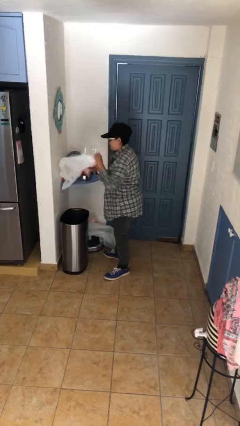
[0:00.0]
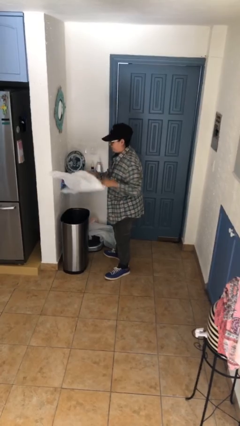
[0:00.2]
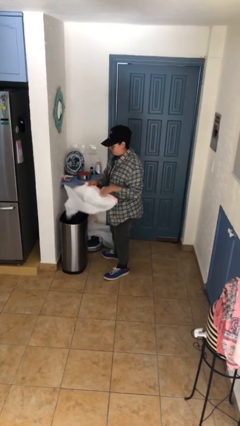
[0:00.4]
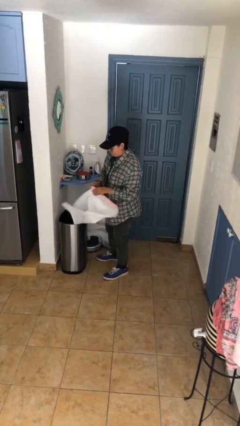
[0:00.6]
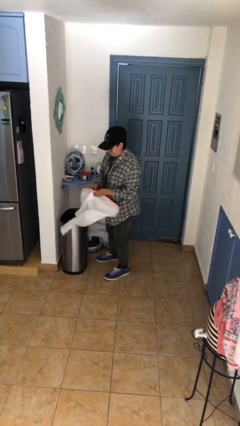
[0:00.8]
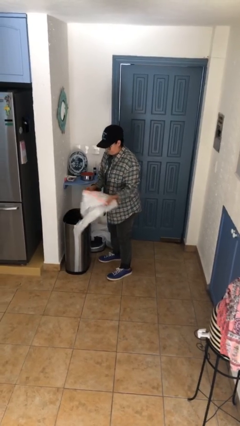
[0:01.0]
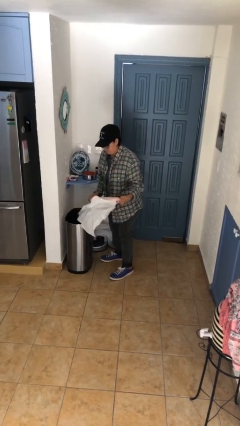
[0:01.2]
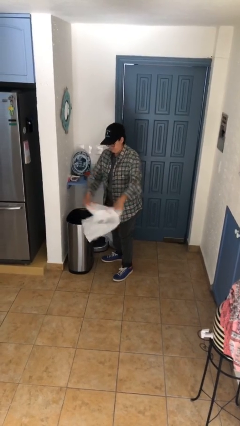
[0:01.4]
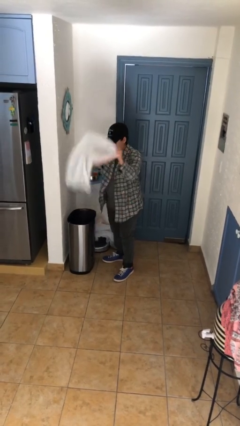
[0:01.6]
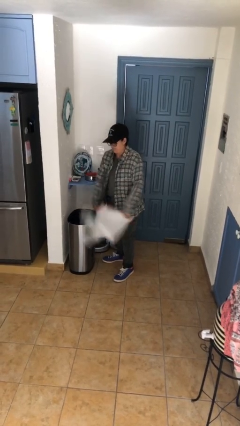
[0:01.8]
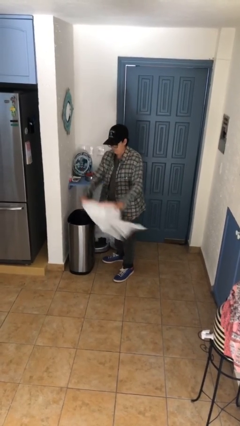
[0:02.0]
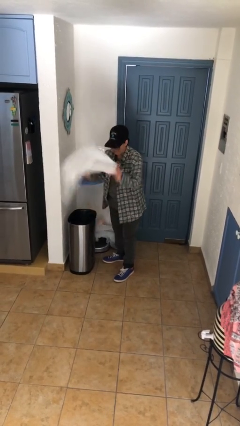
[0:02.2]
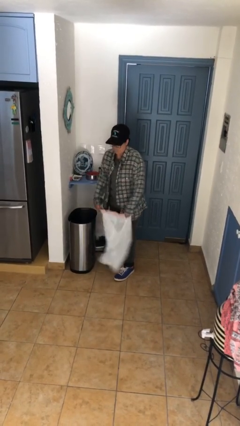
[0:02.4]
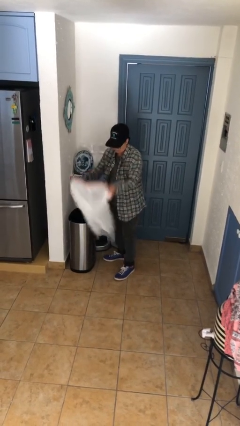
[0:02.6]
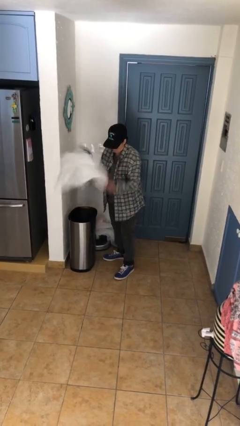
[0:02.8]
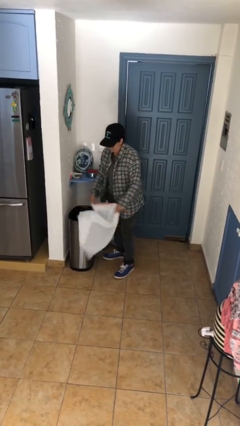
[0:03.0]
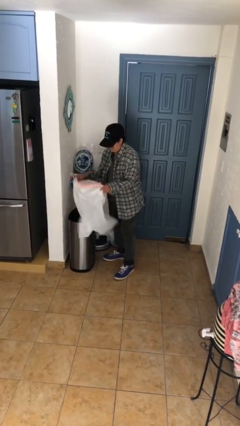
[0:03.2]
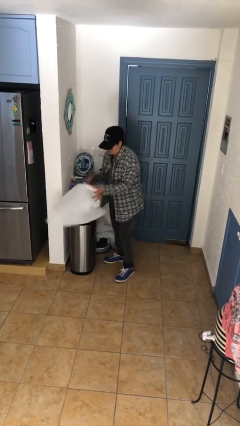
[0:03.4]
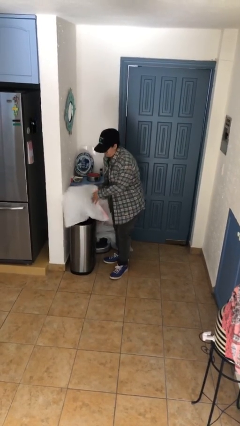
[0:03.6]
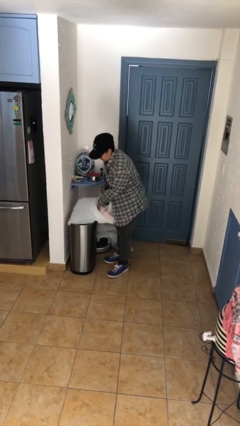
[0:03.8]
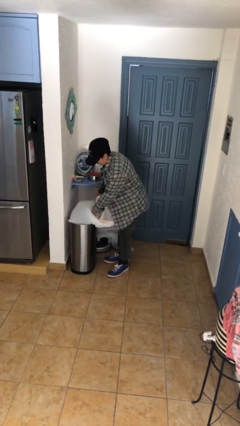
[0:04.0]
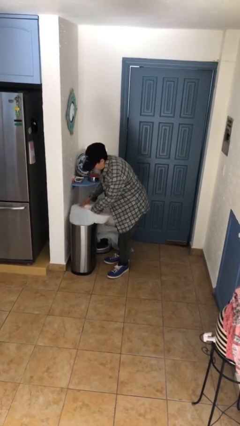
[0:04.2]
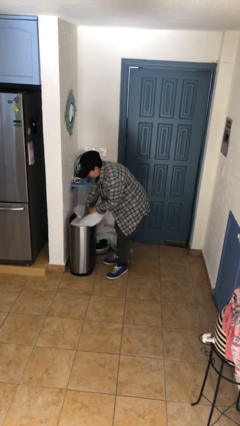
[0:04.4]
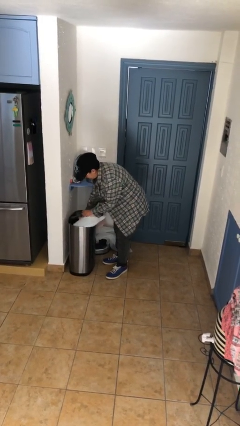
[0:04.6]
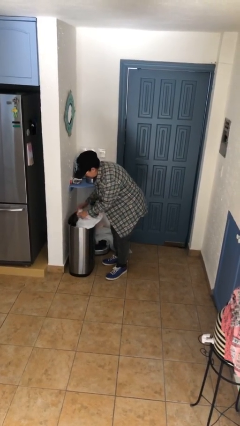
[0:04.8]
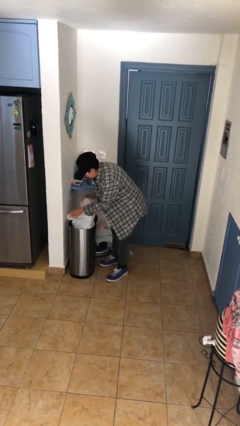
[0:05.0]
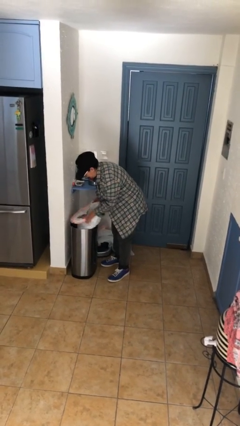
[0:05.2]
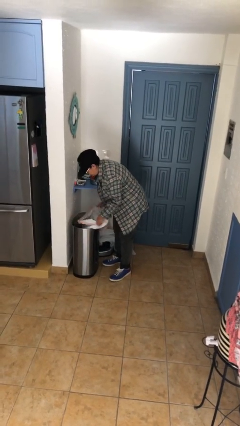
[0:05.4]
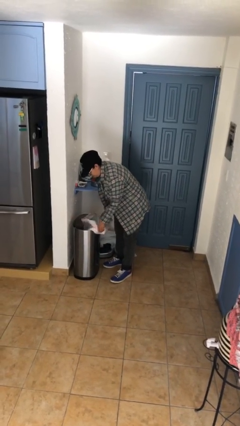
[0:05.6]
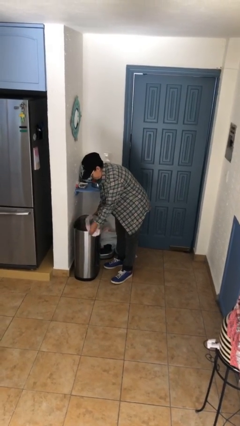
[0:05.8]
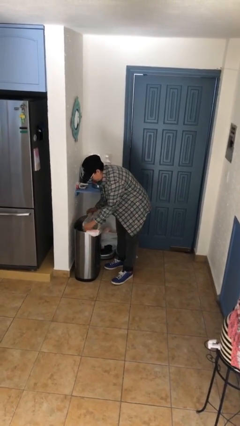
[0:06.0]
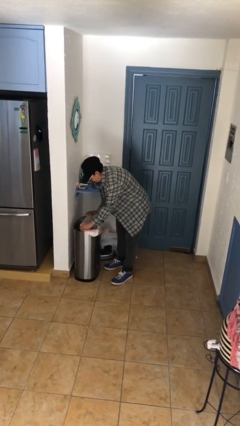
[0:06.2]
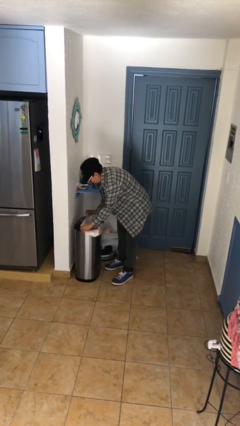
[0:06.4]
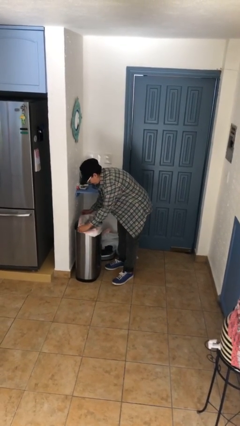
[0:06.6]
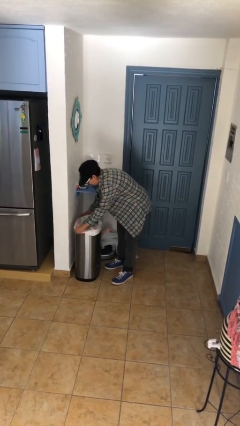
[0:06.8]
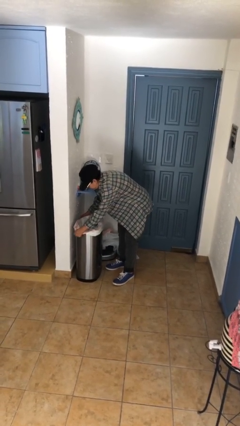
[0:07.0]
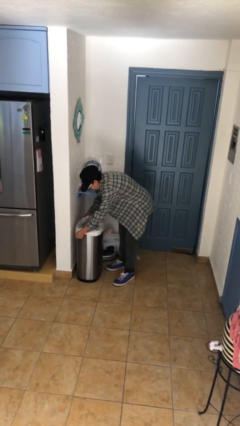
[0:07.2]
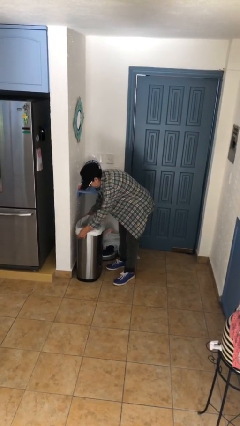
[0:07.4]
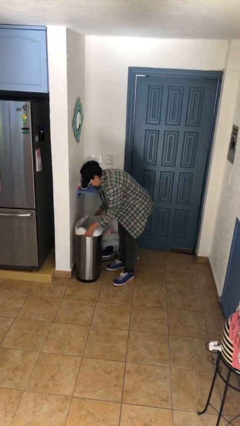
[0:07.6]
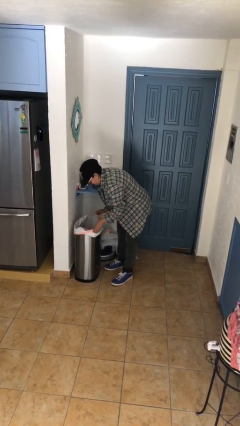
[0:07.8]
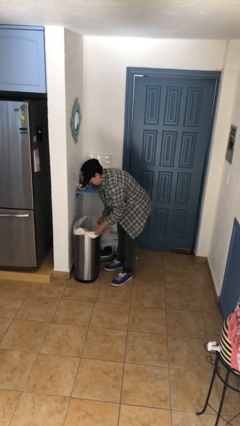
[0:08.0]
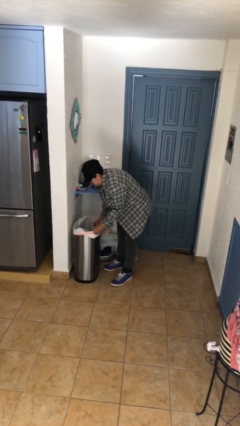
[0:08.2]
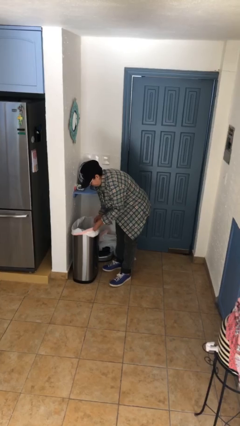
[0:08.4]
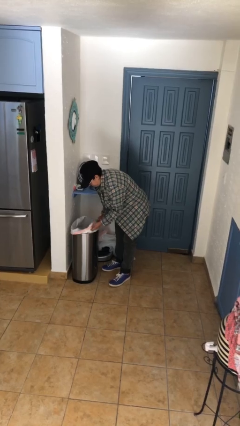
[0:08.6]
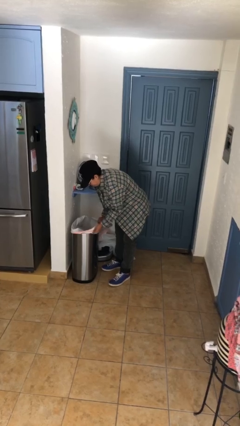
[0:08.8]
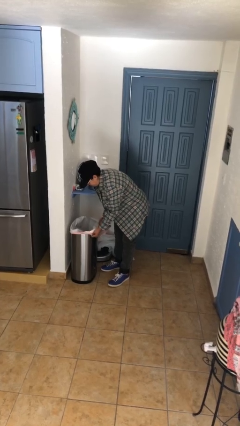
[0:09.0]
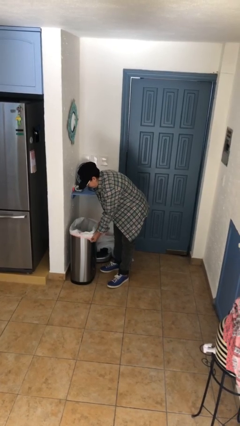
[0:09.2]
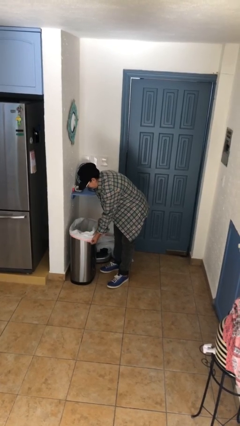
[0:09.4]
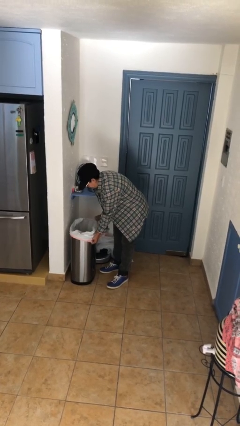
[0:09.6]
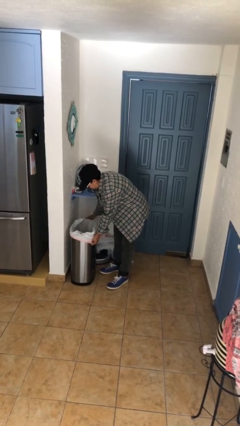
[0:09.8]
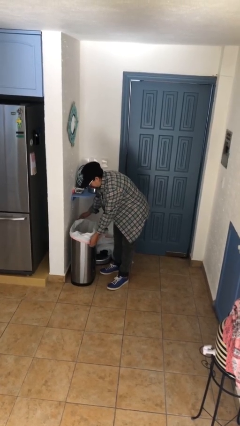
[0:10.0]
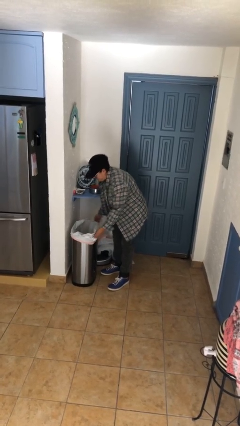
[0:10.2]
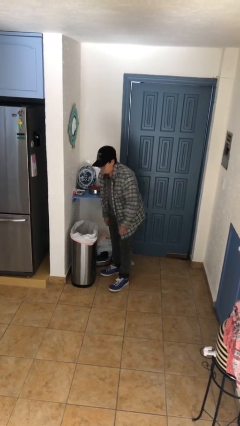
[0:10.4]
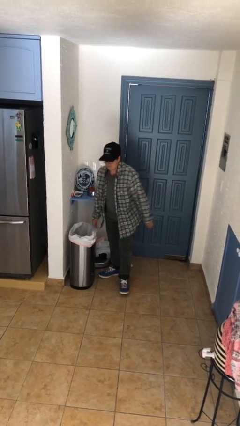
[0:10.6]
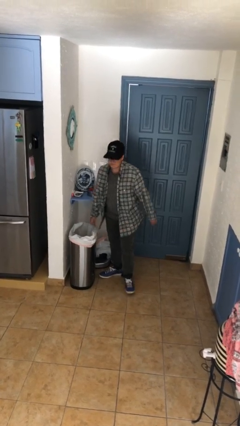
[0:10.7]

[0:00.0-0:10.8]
person inserts trashbag into trashcan

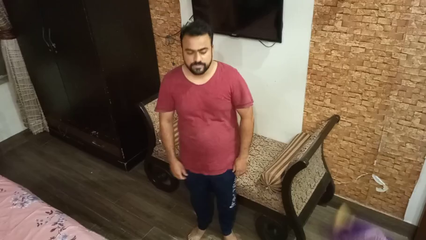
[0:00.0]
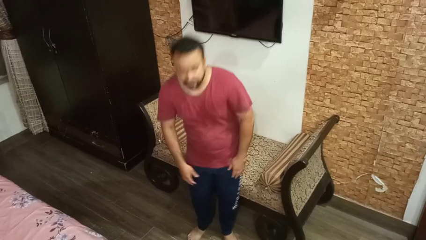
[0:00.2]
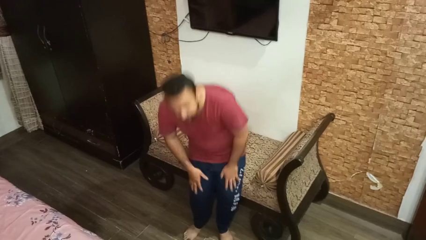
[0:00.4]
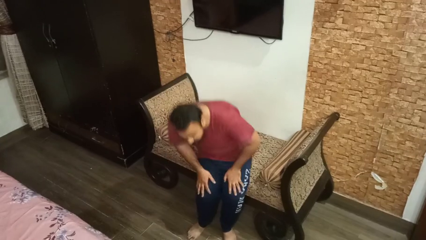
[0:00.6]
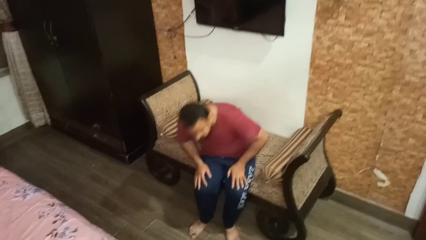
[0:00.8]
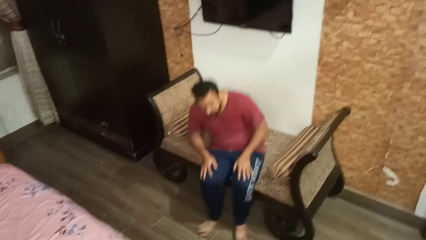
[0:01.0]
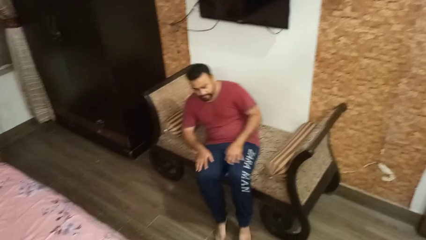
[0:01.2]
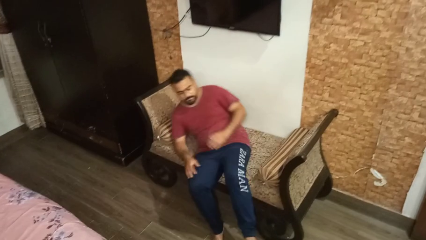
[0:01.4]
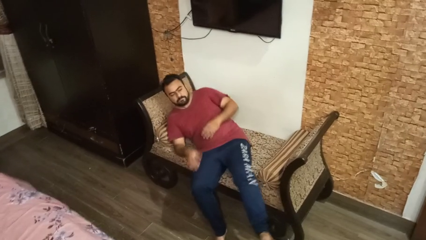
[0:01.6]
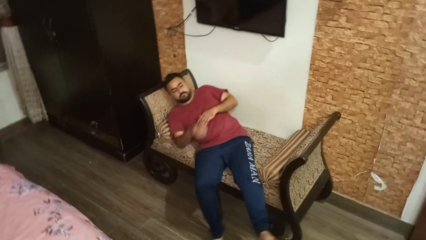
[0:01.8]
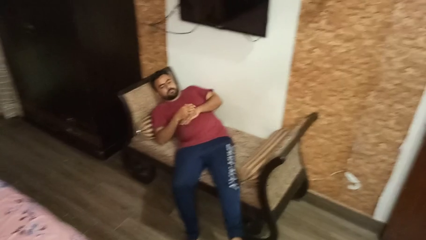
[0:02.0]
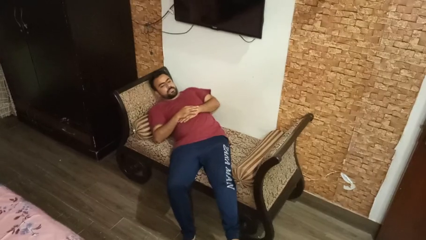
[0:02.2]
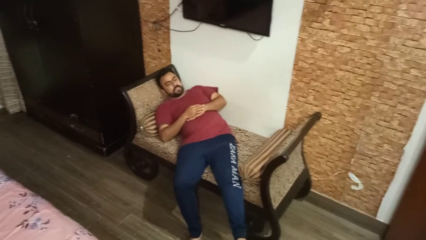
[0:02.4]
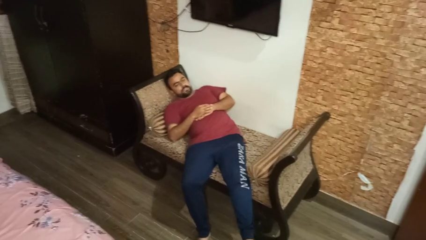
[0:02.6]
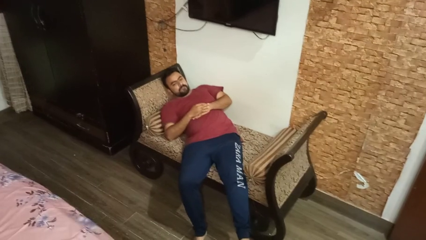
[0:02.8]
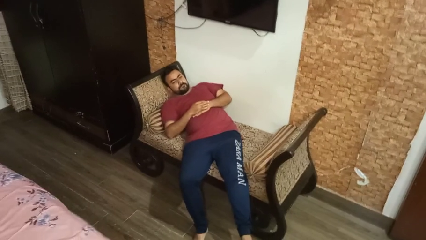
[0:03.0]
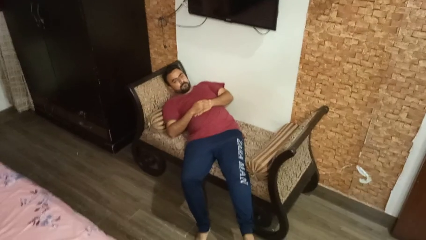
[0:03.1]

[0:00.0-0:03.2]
person lies down on couch

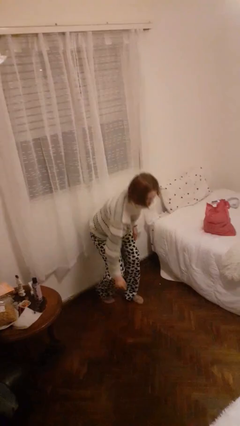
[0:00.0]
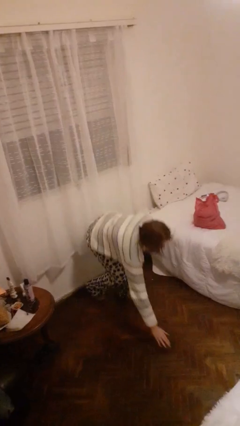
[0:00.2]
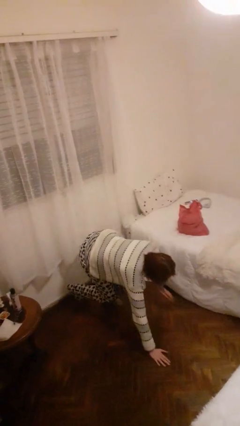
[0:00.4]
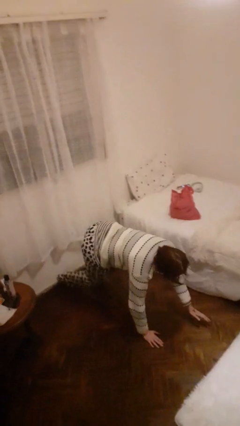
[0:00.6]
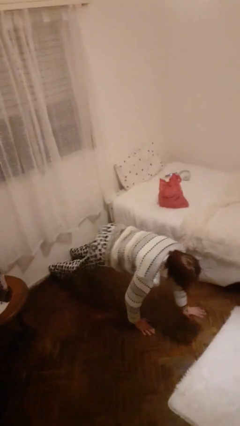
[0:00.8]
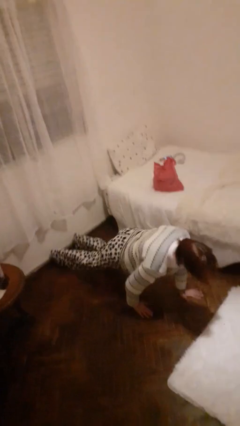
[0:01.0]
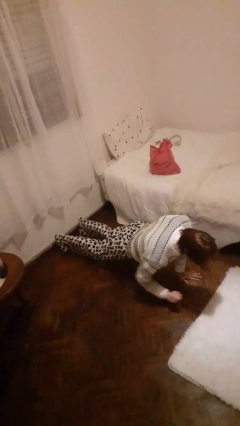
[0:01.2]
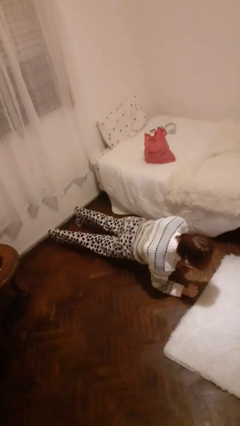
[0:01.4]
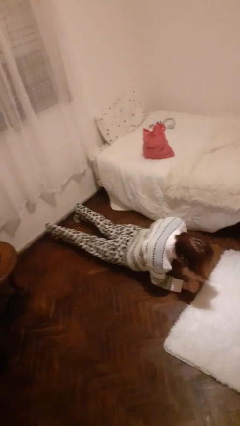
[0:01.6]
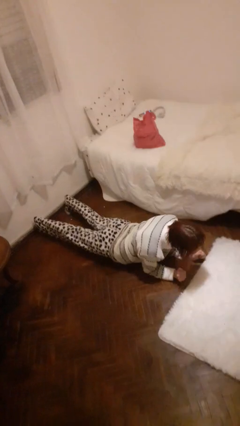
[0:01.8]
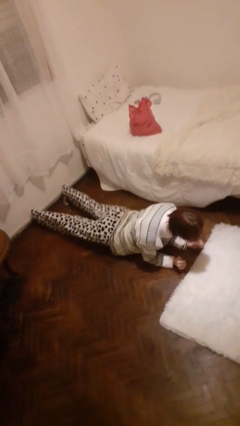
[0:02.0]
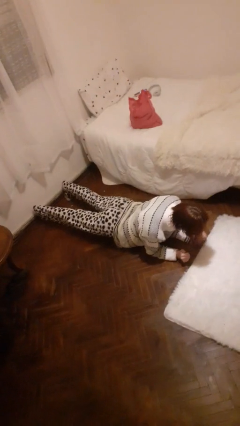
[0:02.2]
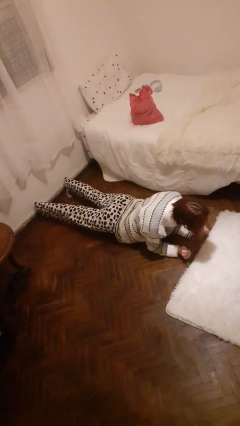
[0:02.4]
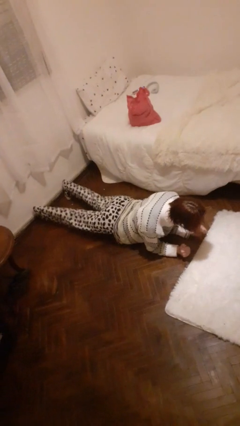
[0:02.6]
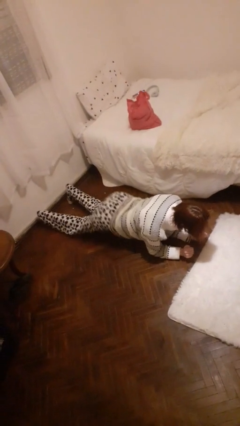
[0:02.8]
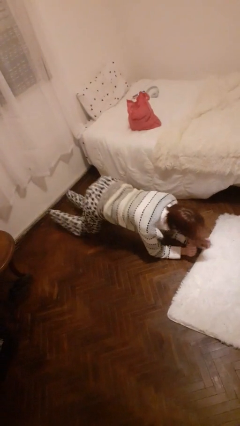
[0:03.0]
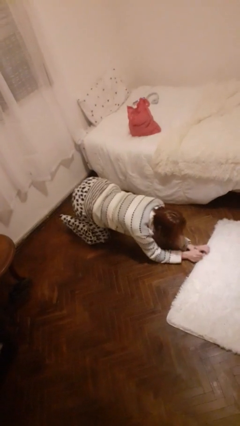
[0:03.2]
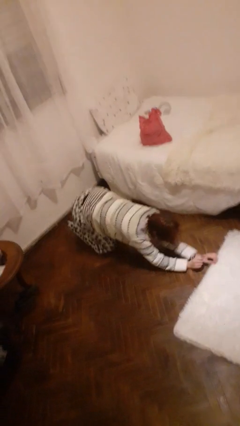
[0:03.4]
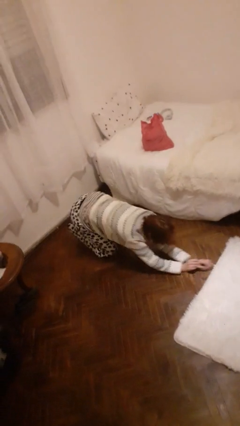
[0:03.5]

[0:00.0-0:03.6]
person exercises with plank

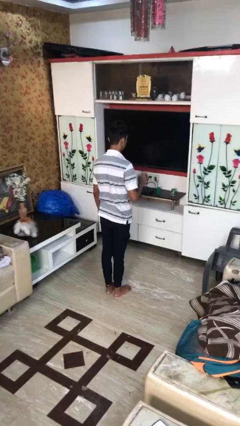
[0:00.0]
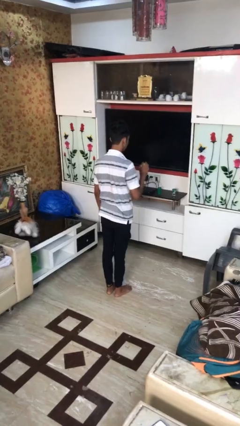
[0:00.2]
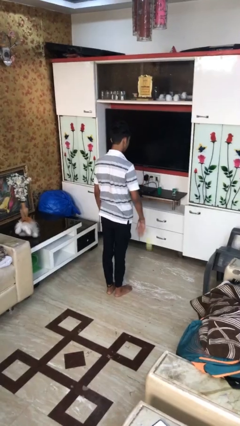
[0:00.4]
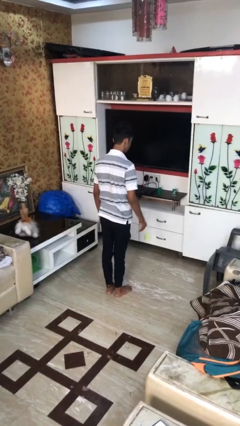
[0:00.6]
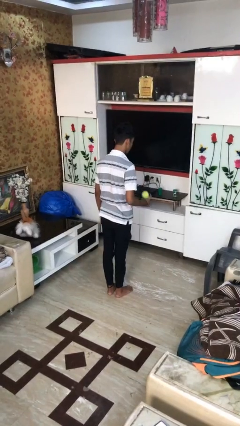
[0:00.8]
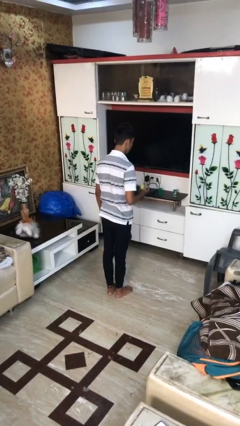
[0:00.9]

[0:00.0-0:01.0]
person bounces ball on floor
